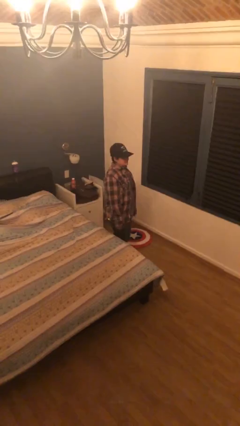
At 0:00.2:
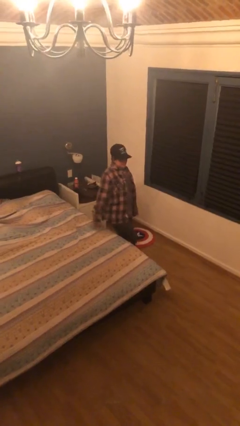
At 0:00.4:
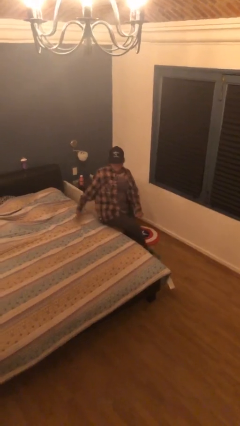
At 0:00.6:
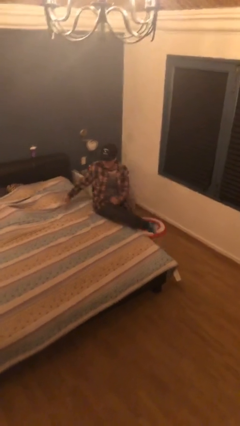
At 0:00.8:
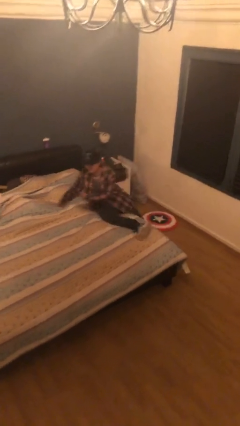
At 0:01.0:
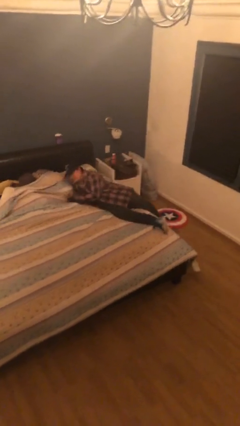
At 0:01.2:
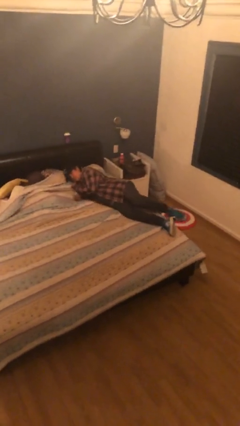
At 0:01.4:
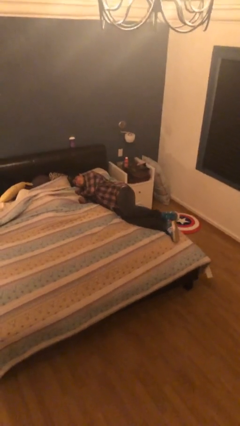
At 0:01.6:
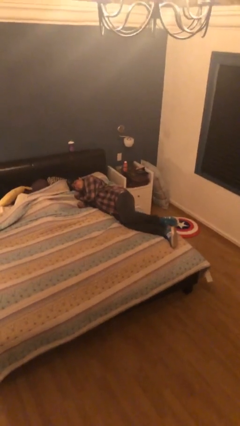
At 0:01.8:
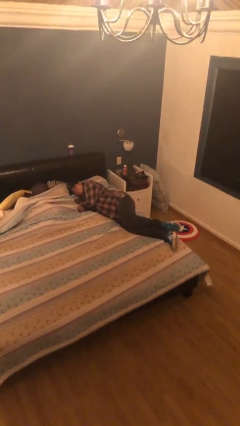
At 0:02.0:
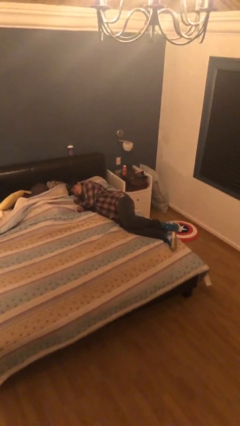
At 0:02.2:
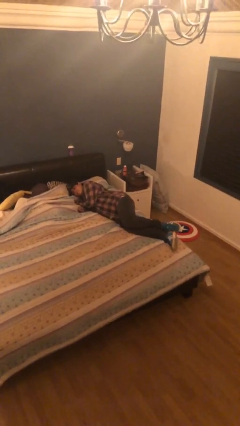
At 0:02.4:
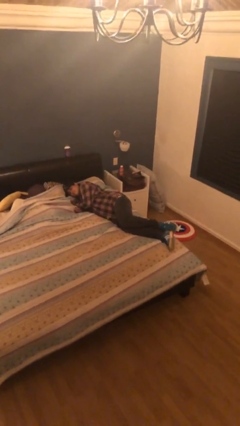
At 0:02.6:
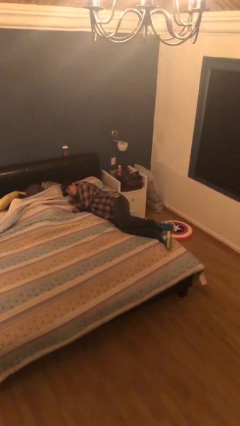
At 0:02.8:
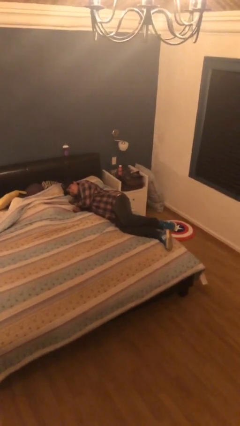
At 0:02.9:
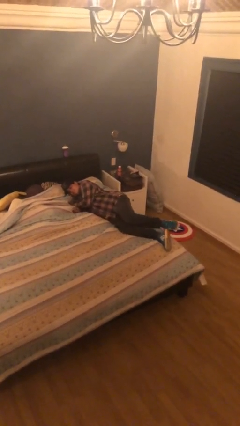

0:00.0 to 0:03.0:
person lies down on bed

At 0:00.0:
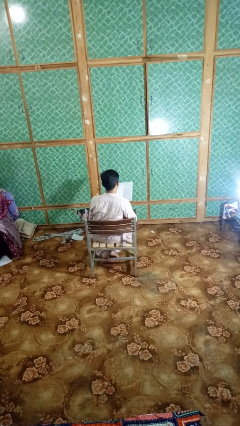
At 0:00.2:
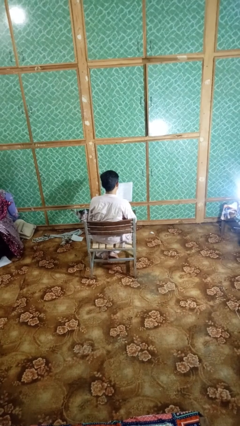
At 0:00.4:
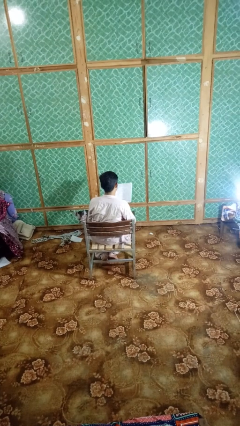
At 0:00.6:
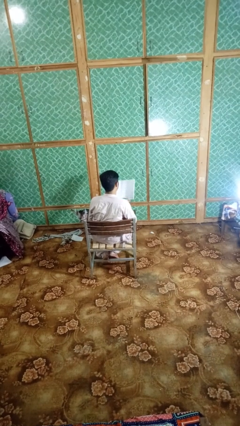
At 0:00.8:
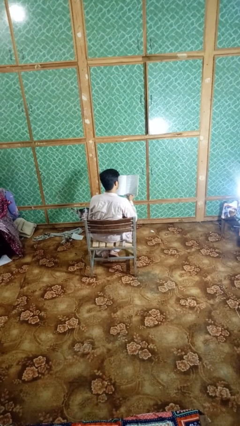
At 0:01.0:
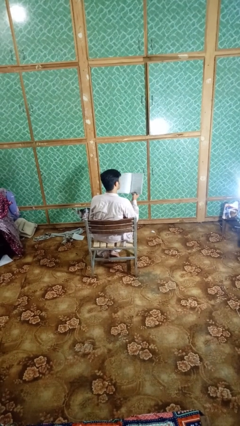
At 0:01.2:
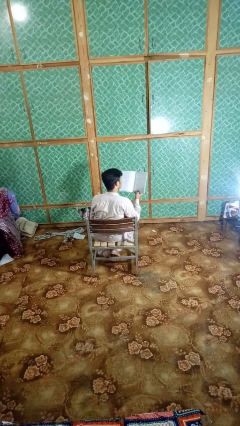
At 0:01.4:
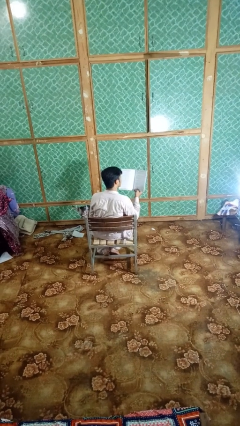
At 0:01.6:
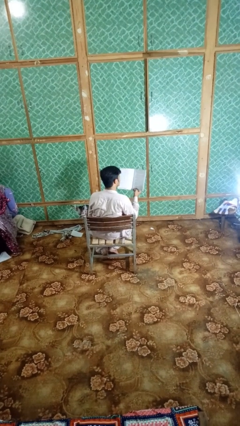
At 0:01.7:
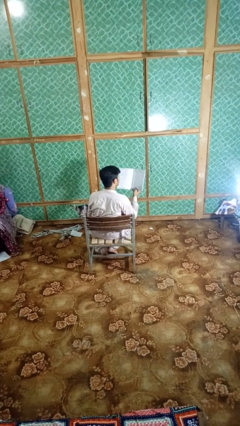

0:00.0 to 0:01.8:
person reads magazine

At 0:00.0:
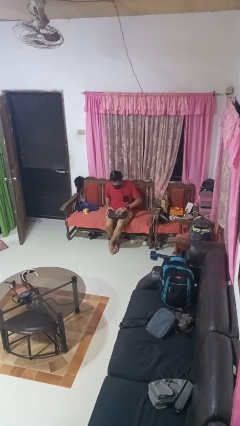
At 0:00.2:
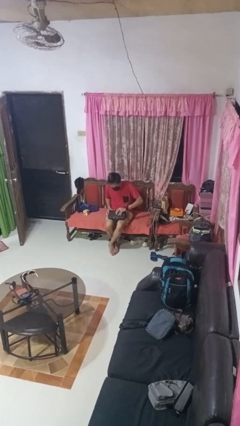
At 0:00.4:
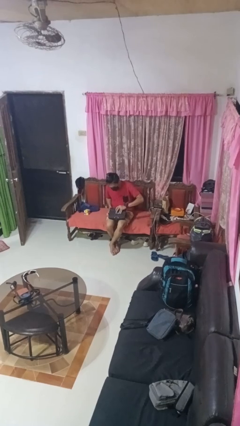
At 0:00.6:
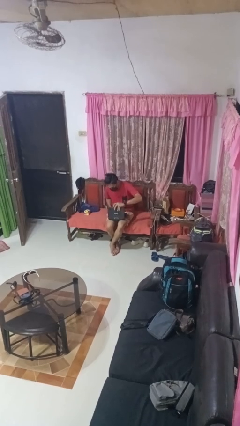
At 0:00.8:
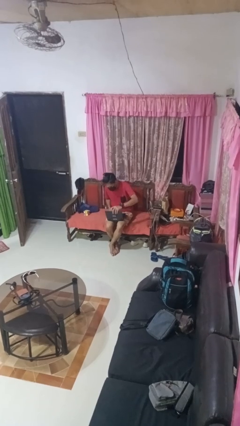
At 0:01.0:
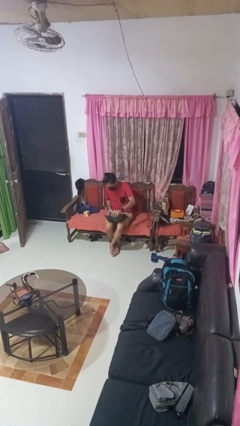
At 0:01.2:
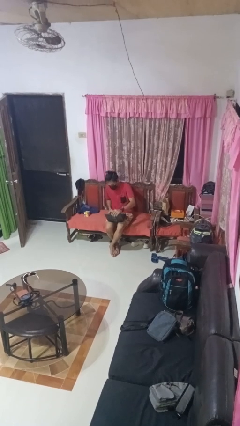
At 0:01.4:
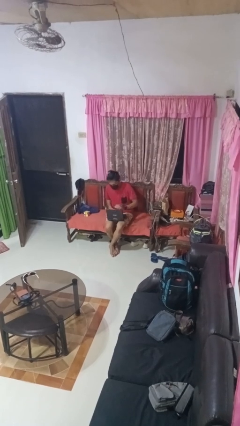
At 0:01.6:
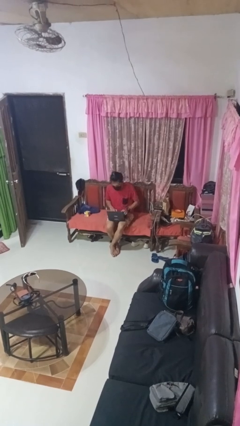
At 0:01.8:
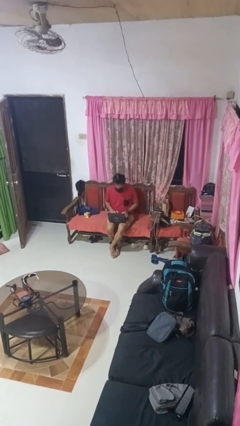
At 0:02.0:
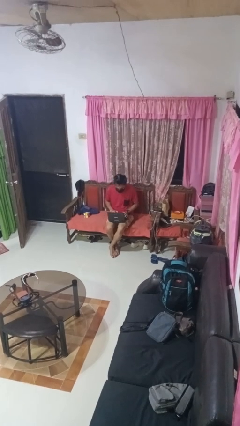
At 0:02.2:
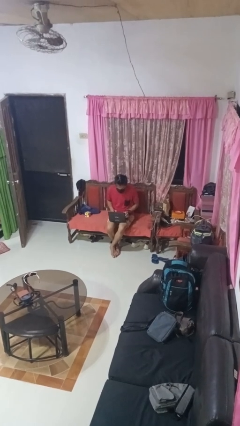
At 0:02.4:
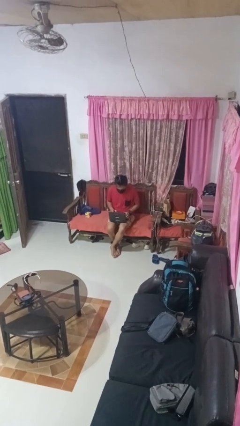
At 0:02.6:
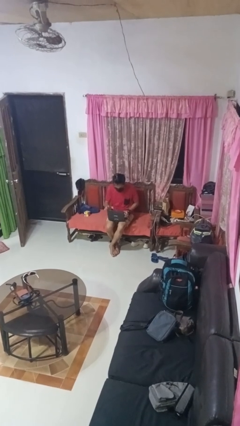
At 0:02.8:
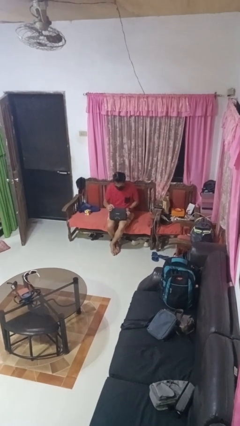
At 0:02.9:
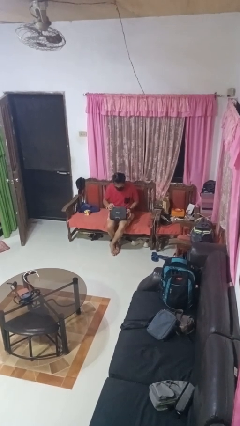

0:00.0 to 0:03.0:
person opens laptop

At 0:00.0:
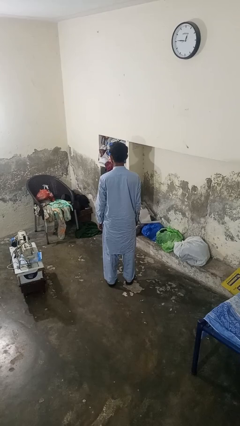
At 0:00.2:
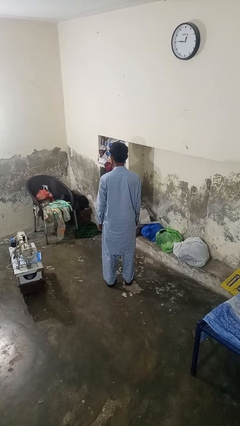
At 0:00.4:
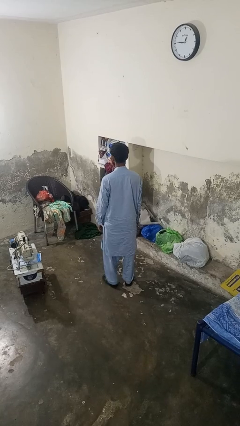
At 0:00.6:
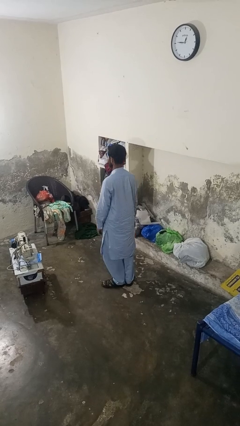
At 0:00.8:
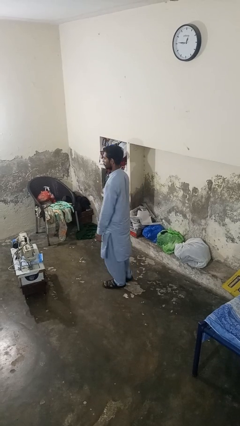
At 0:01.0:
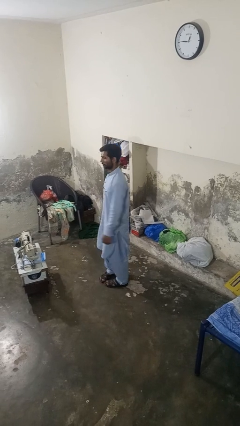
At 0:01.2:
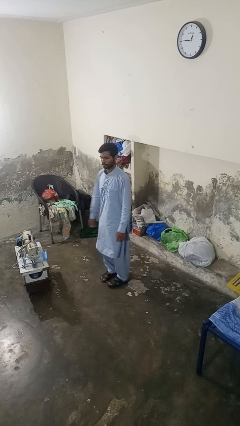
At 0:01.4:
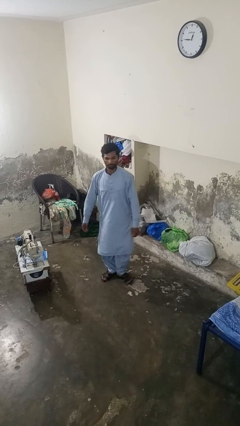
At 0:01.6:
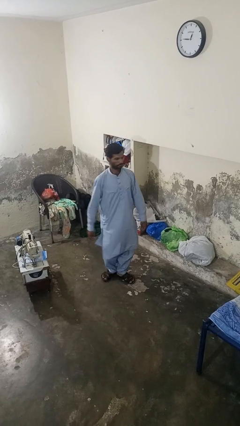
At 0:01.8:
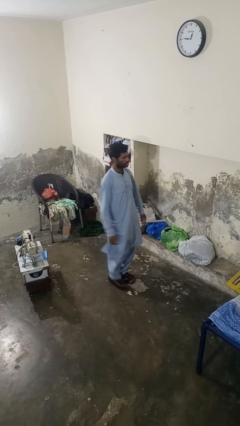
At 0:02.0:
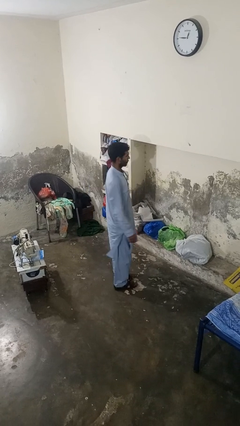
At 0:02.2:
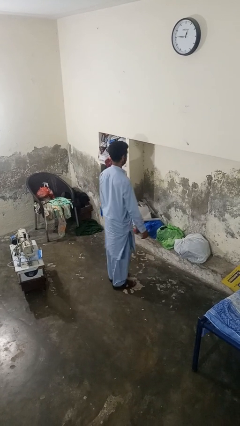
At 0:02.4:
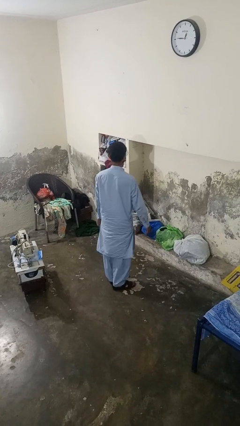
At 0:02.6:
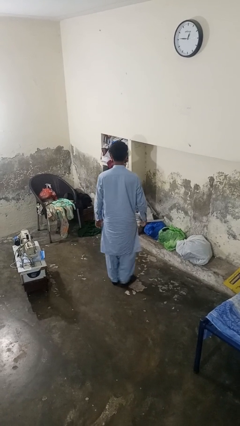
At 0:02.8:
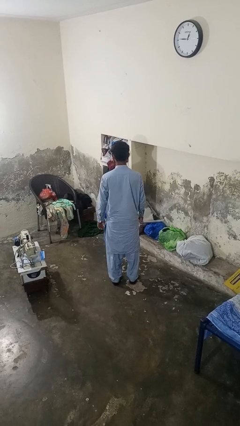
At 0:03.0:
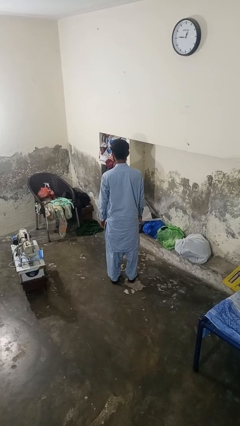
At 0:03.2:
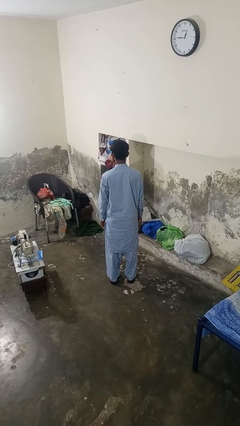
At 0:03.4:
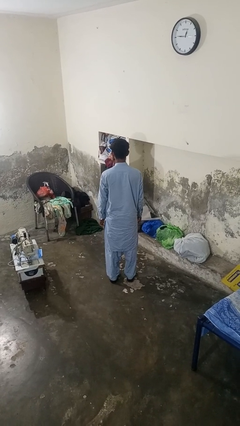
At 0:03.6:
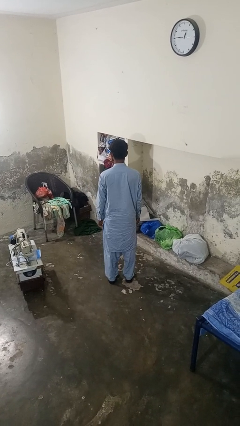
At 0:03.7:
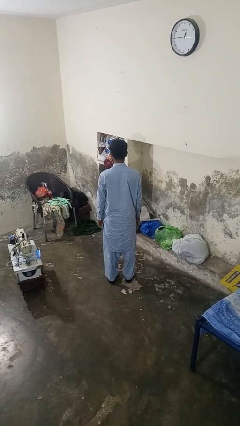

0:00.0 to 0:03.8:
person twirls

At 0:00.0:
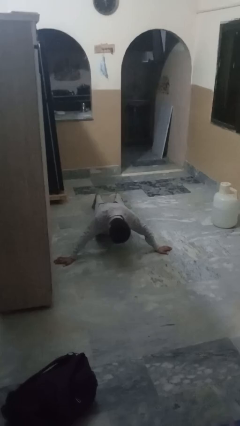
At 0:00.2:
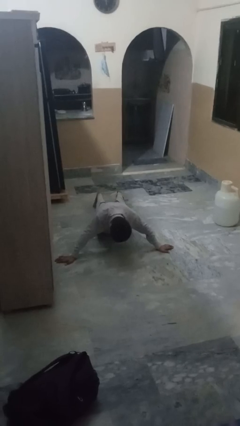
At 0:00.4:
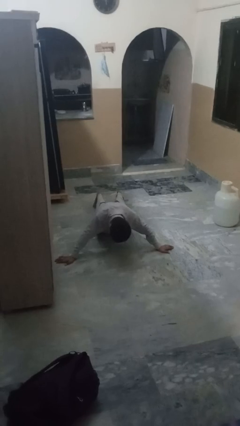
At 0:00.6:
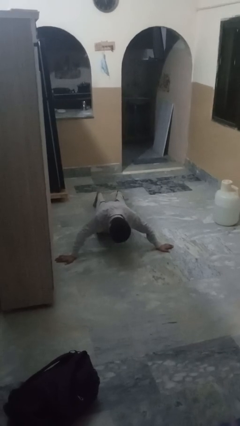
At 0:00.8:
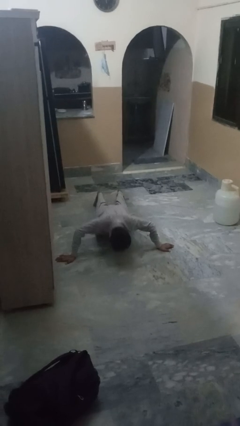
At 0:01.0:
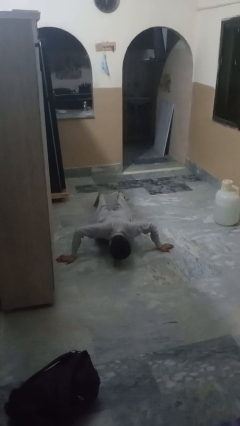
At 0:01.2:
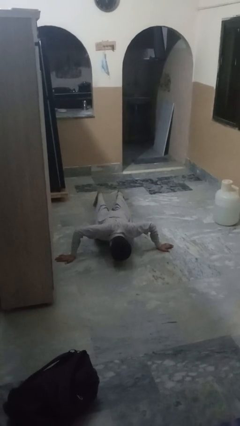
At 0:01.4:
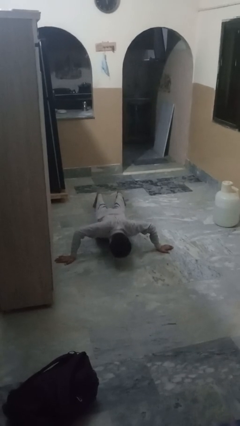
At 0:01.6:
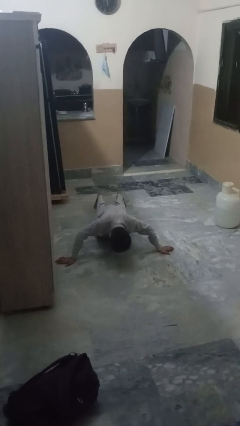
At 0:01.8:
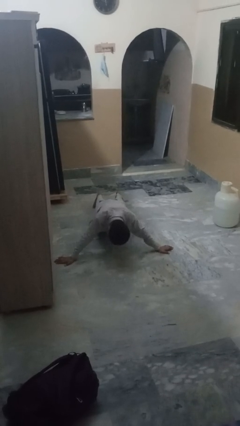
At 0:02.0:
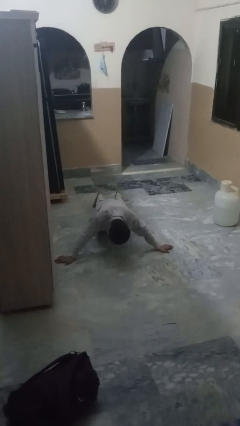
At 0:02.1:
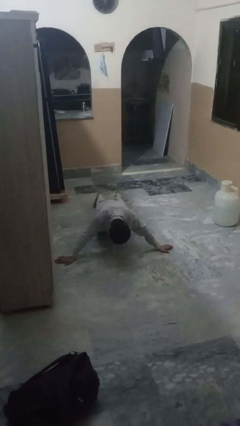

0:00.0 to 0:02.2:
person exercises with pushup

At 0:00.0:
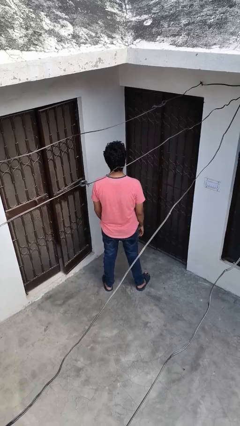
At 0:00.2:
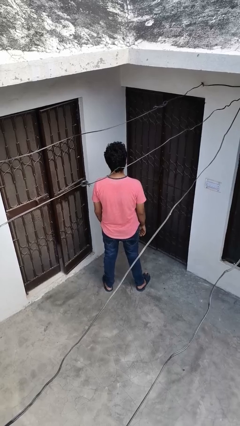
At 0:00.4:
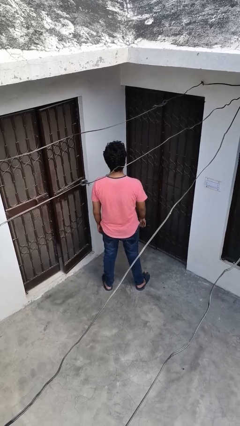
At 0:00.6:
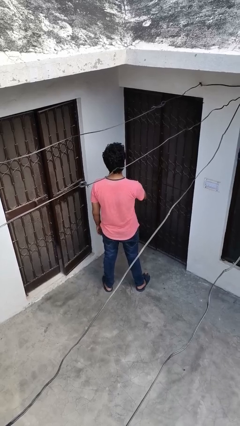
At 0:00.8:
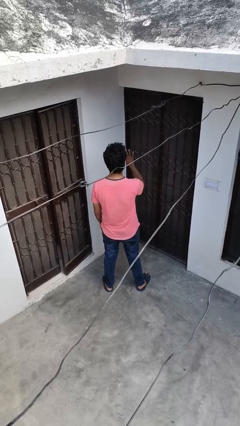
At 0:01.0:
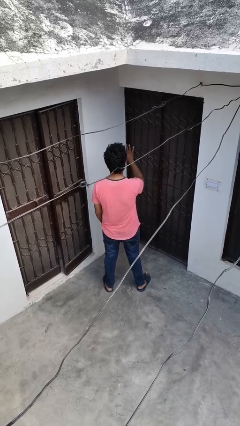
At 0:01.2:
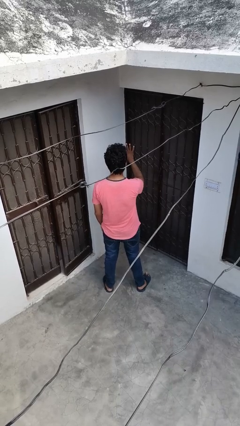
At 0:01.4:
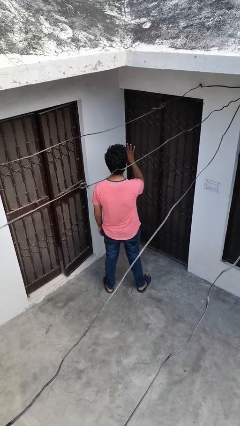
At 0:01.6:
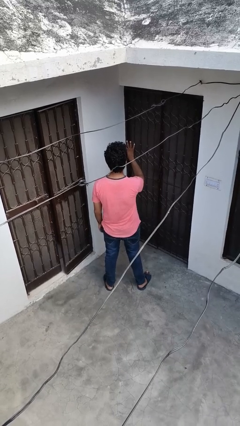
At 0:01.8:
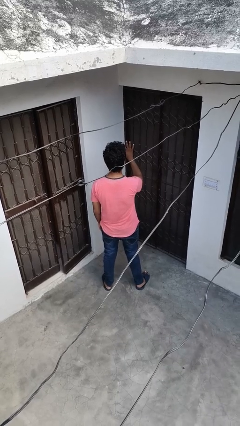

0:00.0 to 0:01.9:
person gestures number four

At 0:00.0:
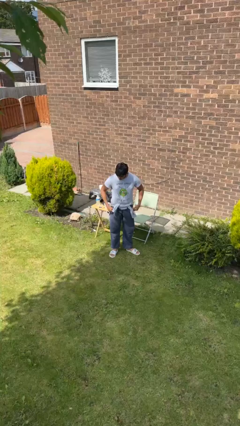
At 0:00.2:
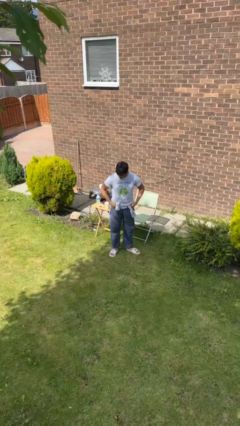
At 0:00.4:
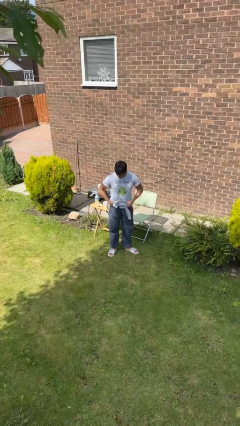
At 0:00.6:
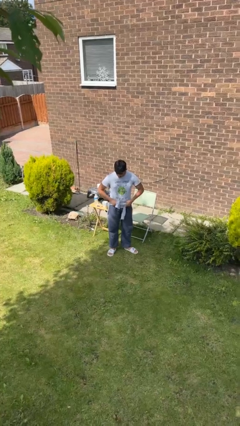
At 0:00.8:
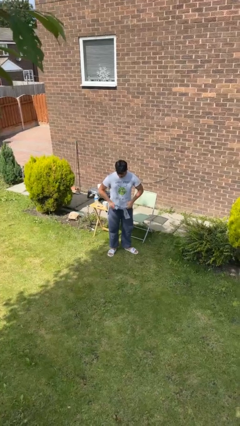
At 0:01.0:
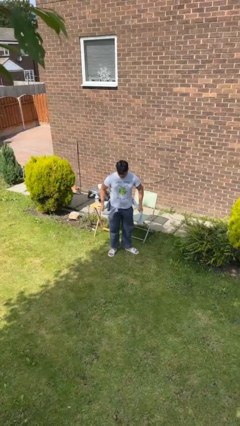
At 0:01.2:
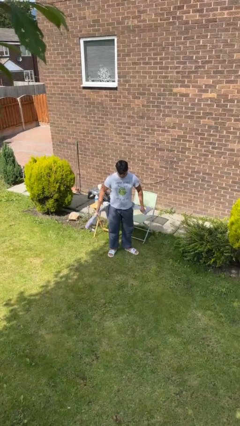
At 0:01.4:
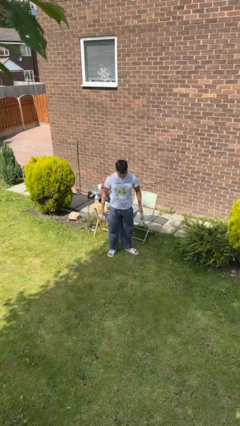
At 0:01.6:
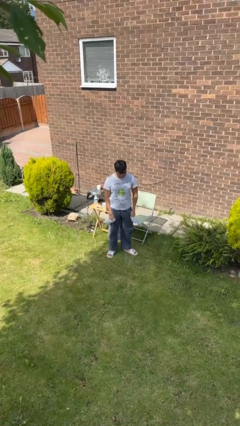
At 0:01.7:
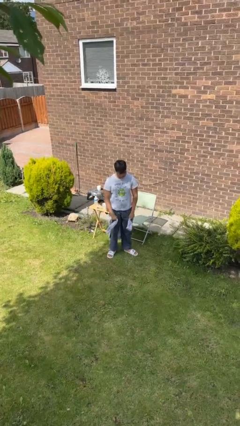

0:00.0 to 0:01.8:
person unties jacket around waist
